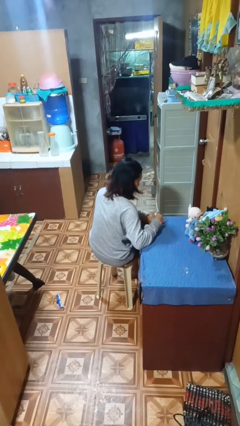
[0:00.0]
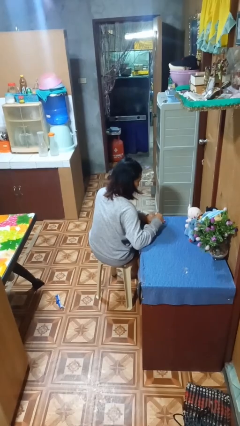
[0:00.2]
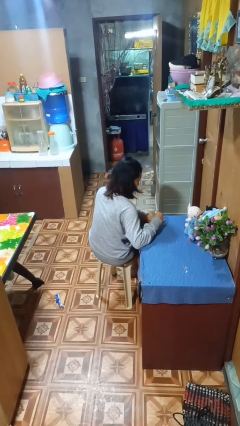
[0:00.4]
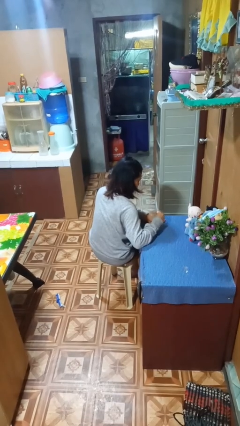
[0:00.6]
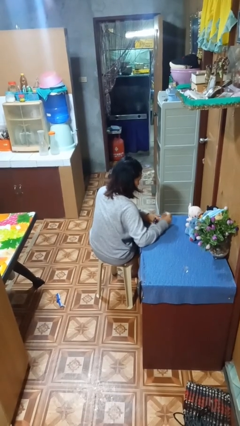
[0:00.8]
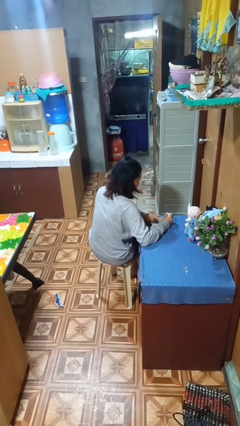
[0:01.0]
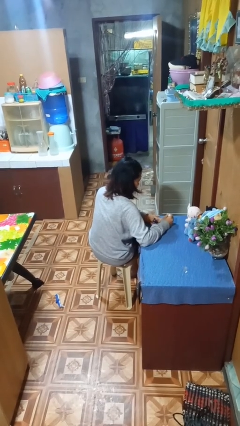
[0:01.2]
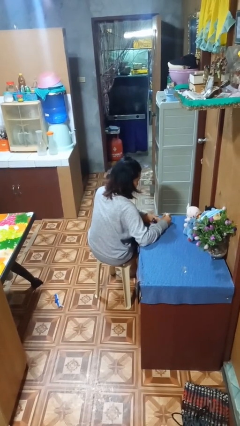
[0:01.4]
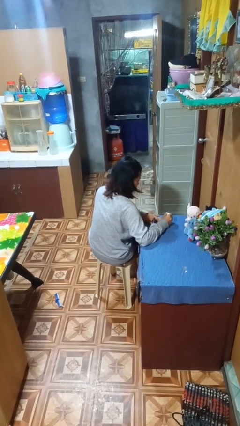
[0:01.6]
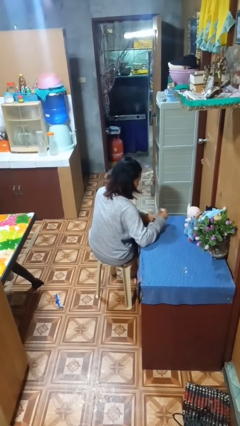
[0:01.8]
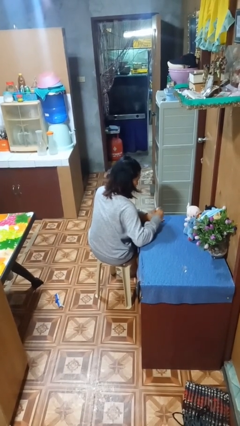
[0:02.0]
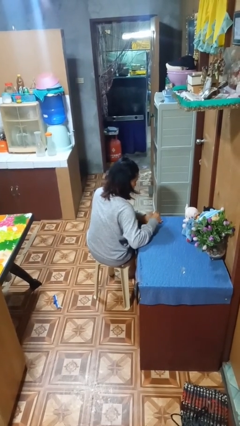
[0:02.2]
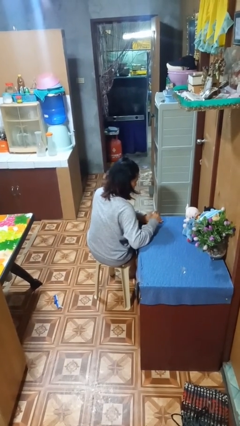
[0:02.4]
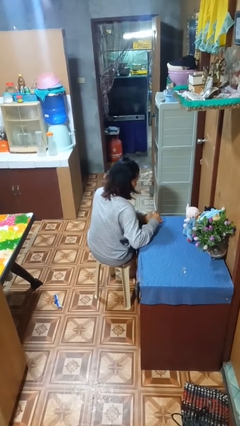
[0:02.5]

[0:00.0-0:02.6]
person paints fingernails

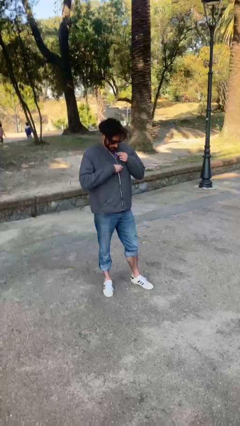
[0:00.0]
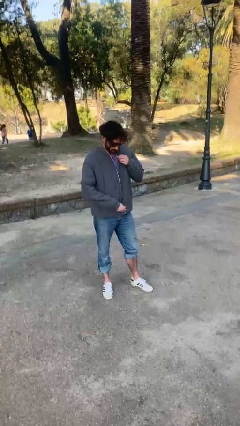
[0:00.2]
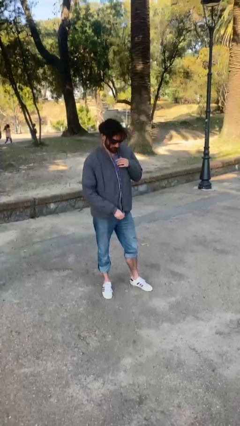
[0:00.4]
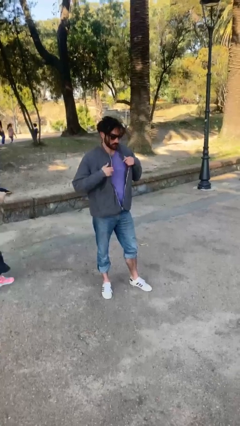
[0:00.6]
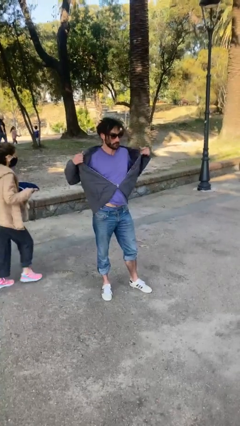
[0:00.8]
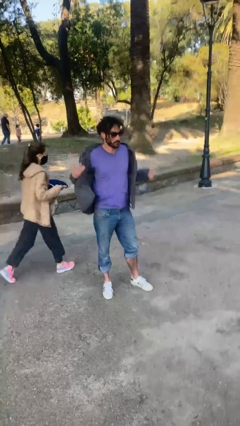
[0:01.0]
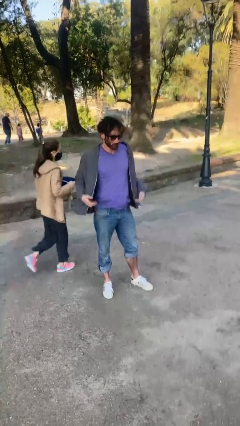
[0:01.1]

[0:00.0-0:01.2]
person unzips jacket

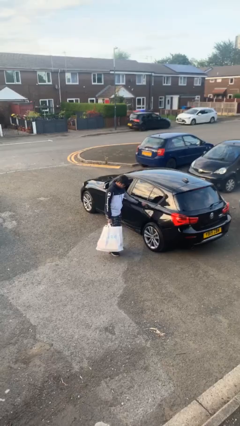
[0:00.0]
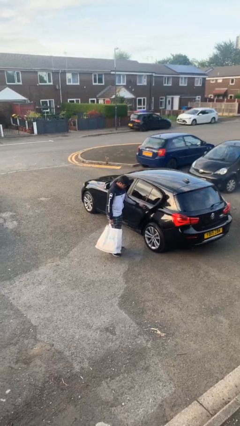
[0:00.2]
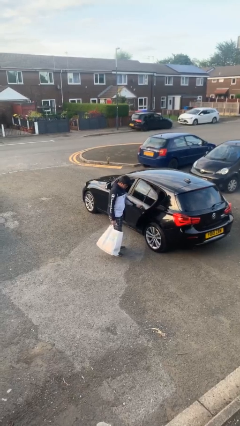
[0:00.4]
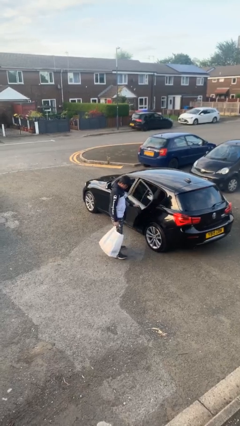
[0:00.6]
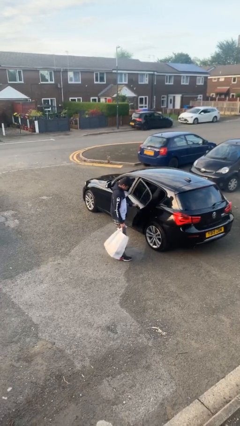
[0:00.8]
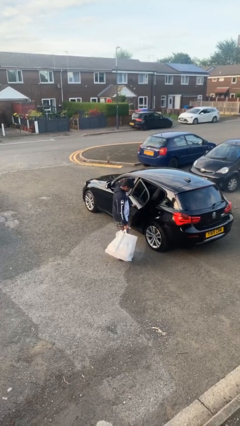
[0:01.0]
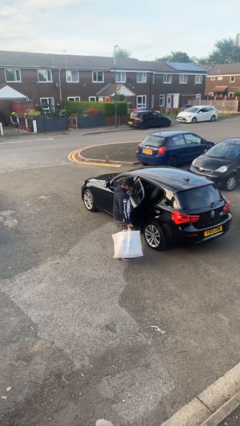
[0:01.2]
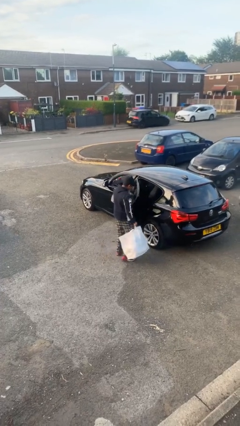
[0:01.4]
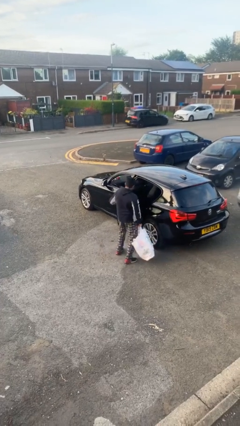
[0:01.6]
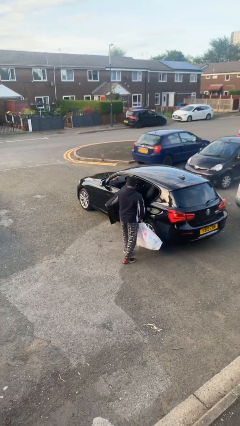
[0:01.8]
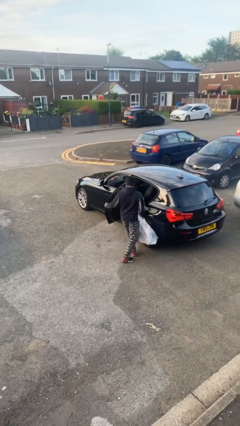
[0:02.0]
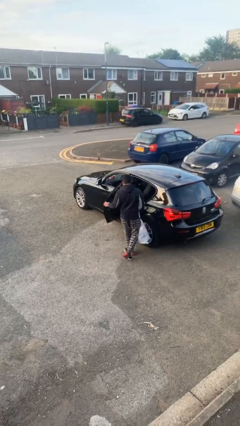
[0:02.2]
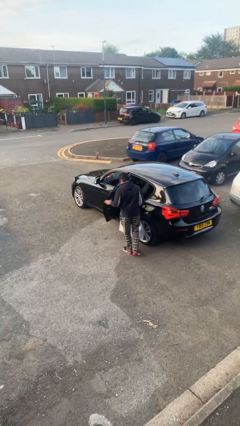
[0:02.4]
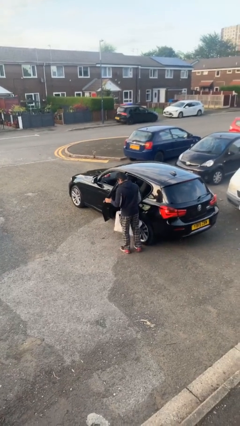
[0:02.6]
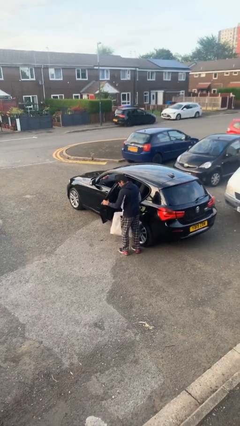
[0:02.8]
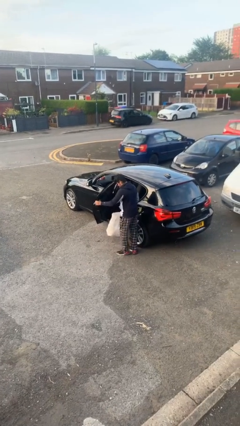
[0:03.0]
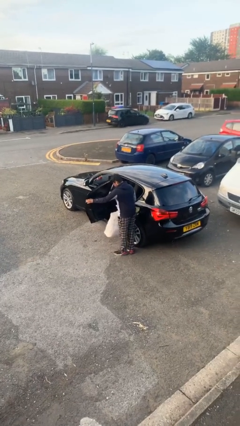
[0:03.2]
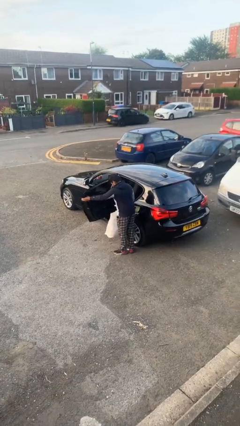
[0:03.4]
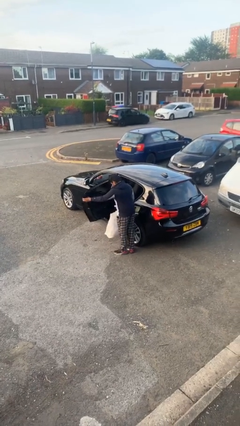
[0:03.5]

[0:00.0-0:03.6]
person opens car door

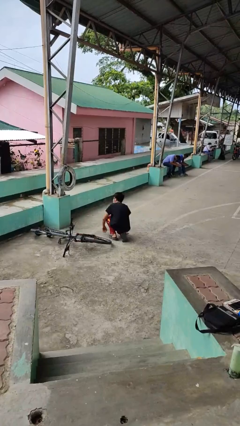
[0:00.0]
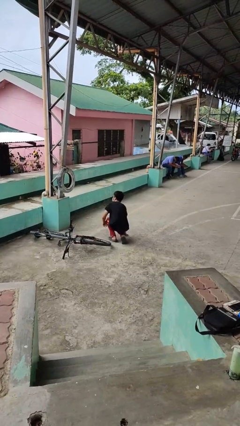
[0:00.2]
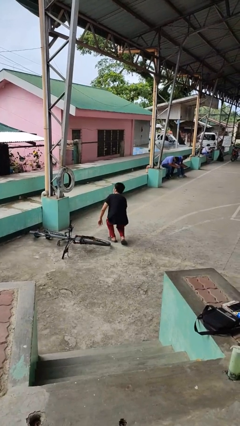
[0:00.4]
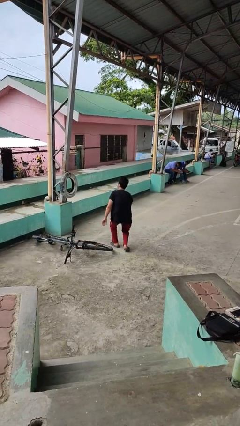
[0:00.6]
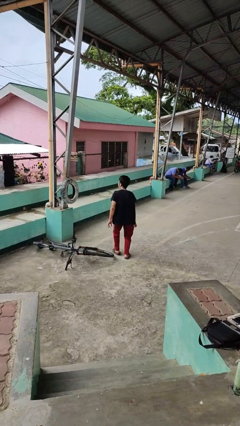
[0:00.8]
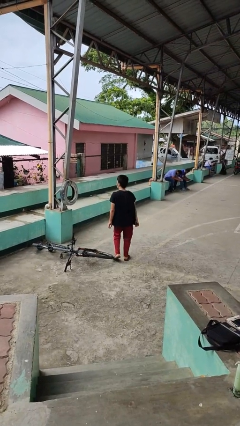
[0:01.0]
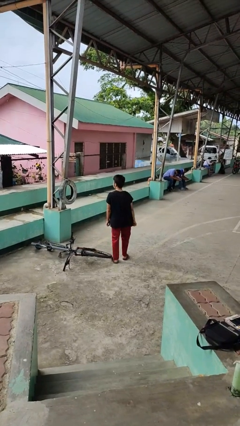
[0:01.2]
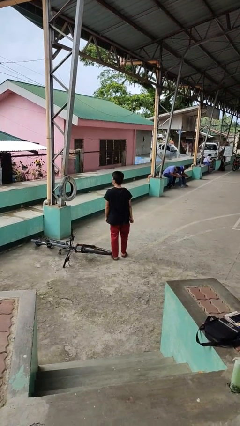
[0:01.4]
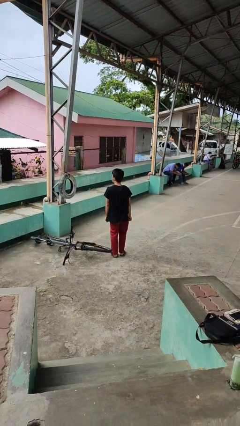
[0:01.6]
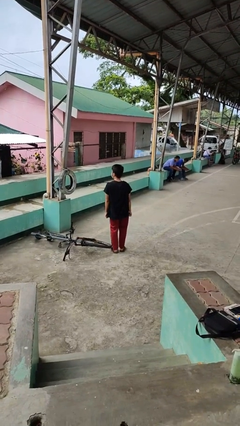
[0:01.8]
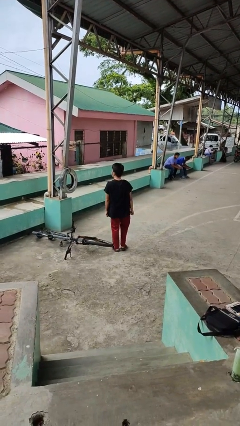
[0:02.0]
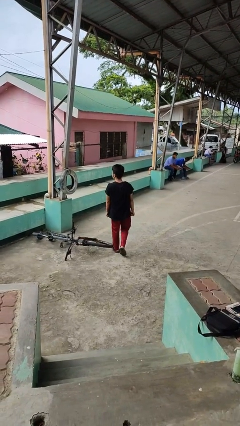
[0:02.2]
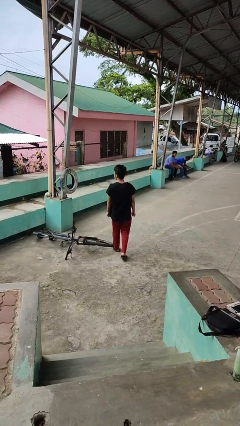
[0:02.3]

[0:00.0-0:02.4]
person stands up from floor

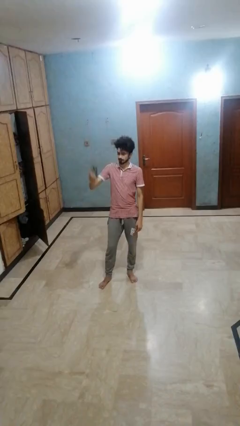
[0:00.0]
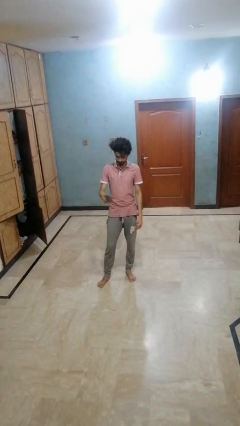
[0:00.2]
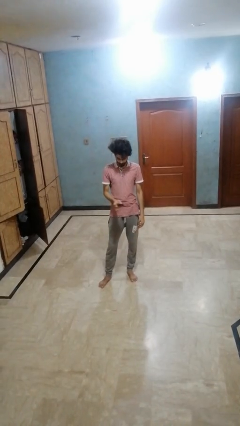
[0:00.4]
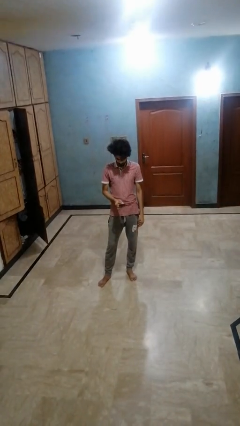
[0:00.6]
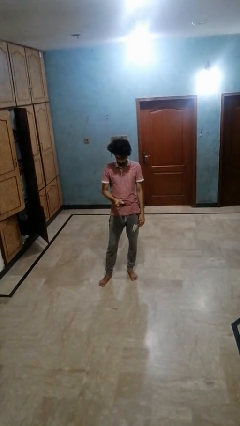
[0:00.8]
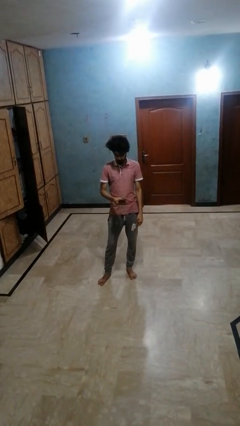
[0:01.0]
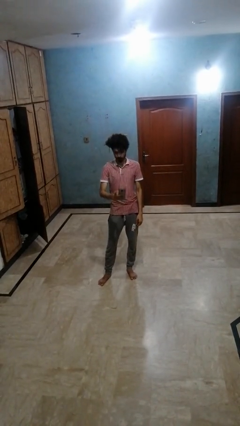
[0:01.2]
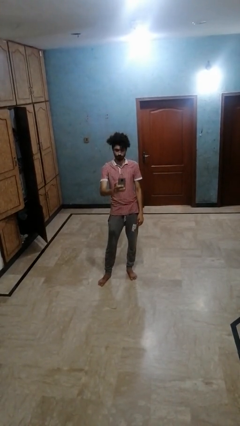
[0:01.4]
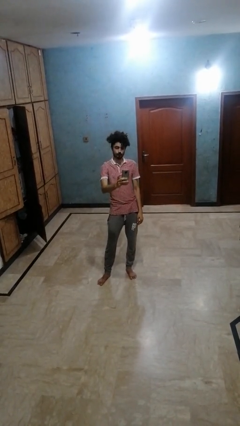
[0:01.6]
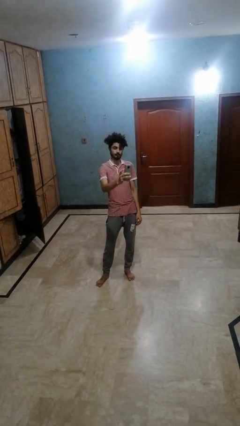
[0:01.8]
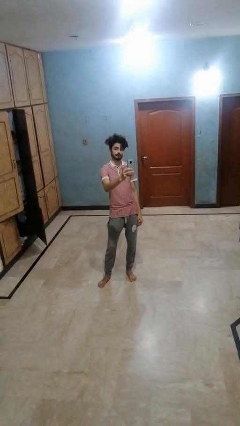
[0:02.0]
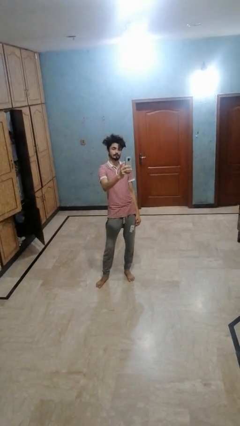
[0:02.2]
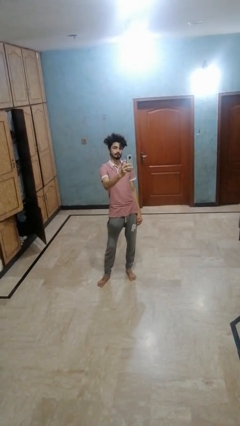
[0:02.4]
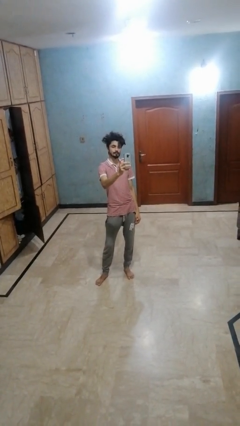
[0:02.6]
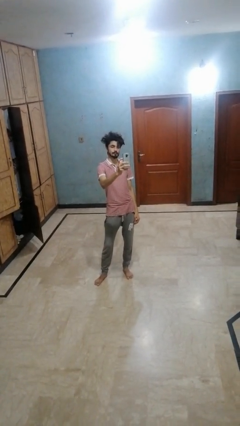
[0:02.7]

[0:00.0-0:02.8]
person takes selfie

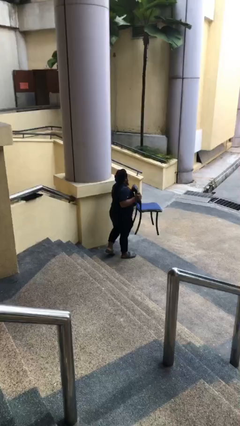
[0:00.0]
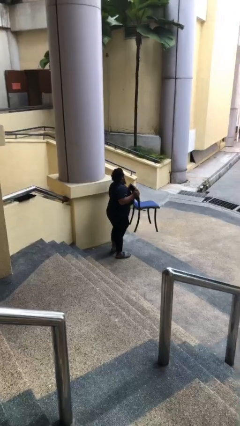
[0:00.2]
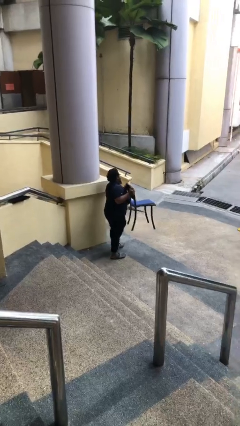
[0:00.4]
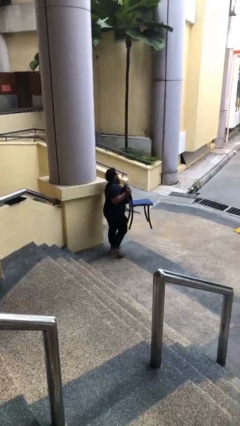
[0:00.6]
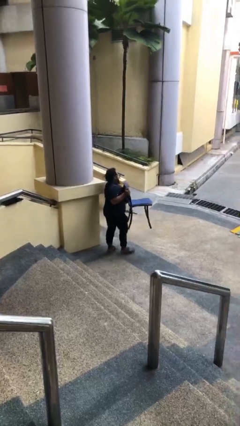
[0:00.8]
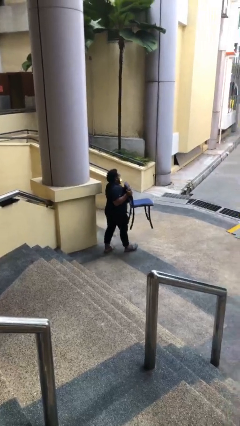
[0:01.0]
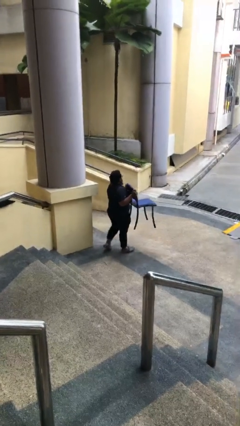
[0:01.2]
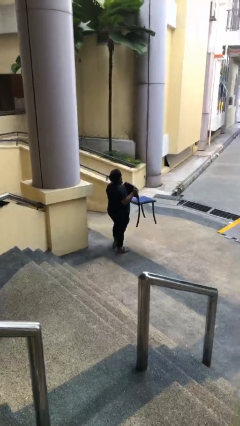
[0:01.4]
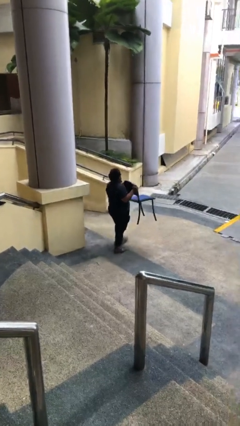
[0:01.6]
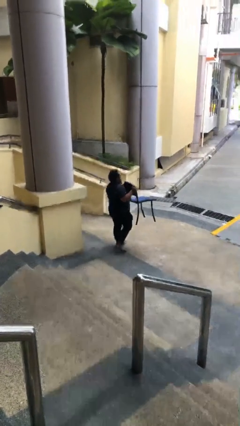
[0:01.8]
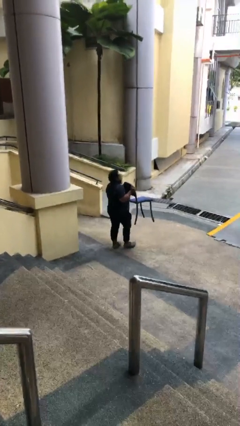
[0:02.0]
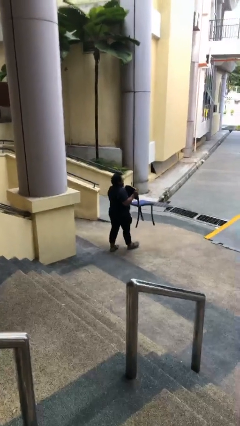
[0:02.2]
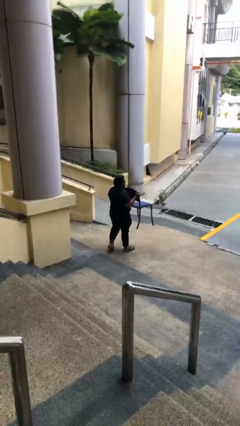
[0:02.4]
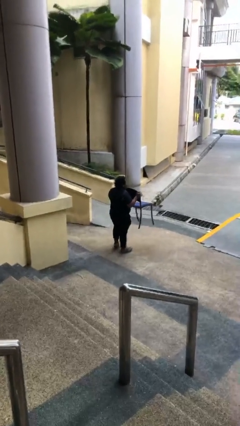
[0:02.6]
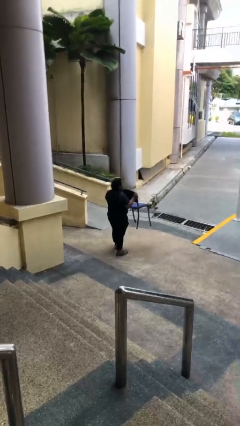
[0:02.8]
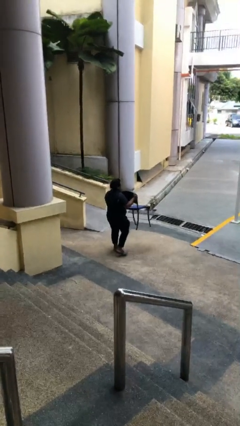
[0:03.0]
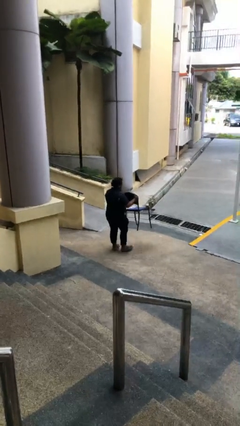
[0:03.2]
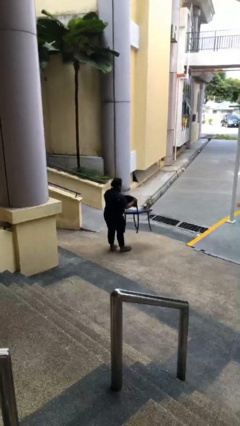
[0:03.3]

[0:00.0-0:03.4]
person carries heavy object

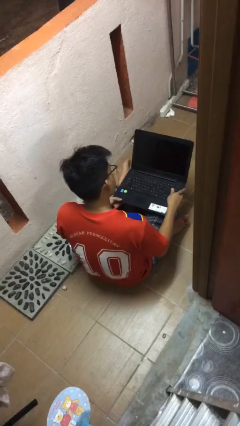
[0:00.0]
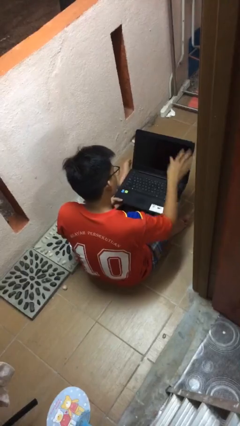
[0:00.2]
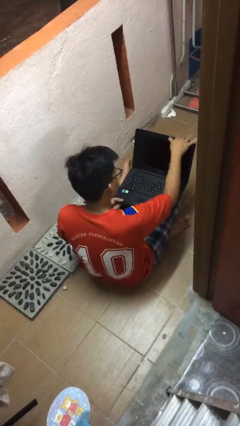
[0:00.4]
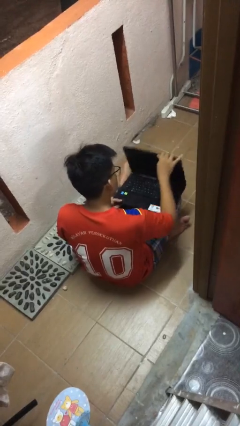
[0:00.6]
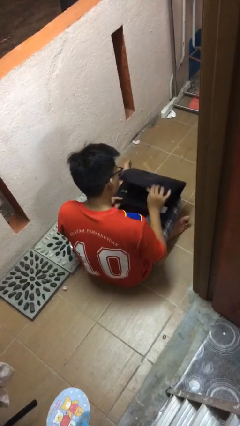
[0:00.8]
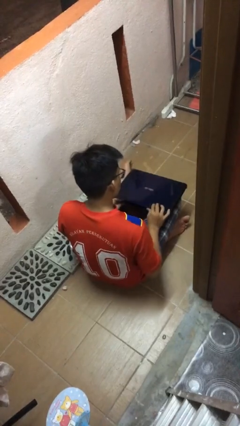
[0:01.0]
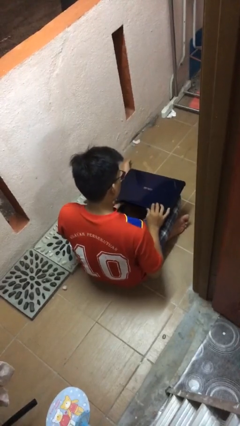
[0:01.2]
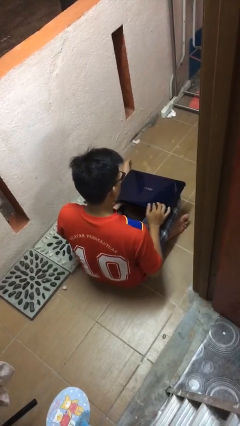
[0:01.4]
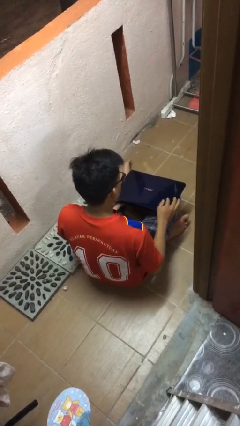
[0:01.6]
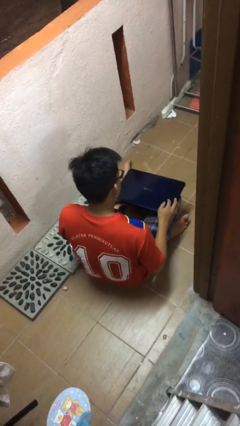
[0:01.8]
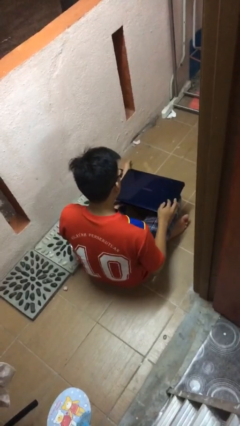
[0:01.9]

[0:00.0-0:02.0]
person closes laptop
